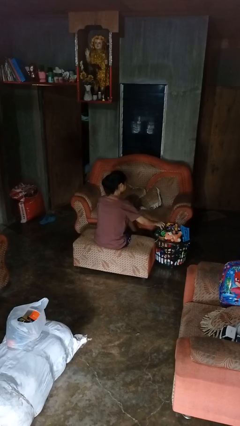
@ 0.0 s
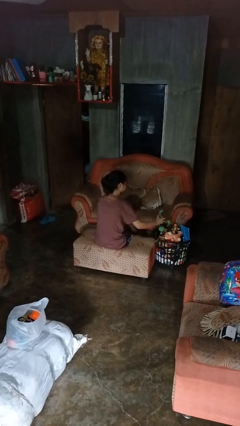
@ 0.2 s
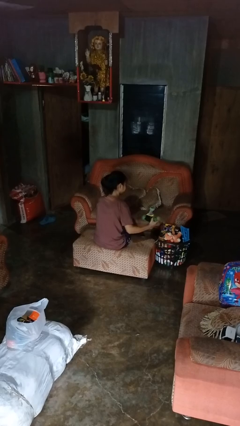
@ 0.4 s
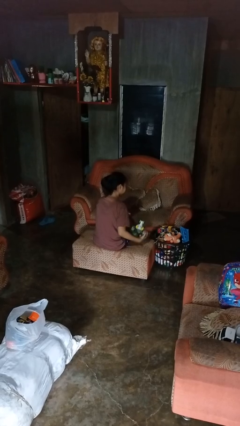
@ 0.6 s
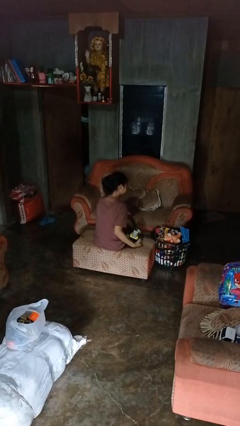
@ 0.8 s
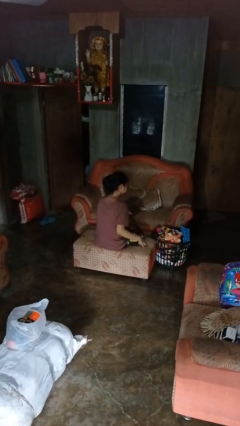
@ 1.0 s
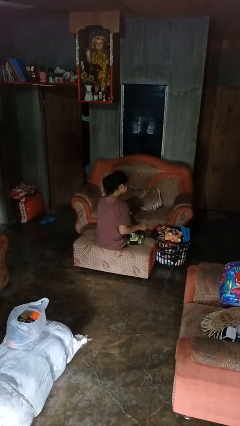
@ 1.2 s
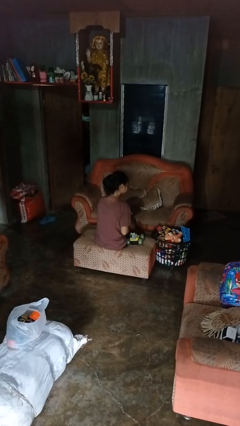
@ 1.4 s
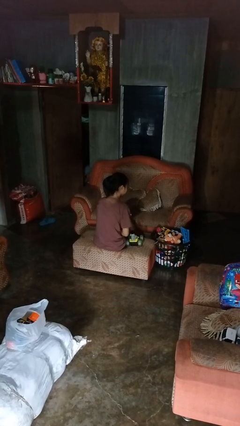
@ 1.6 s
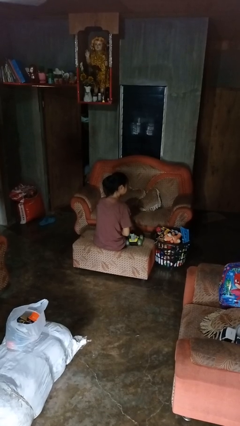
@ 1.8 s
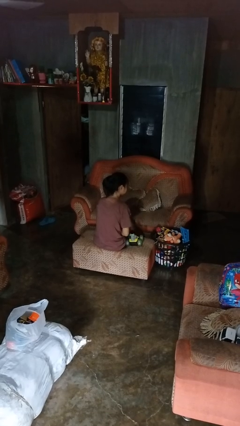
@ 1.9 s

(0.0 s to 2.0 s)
person takes object from basket

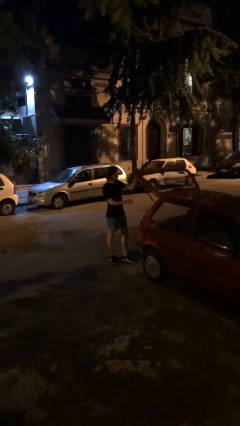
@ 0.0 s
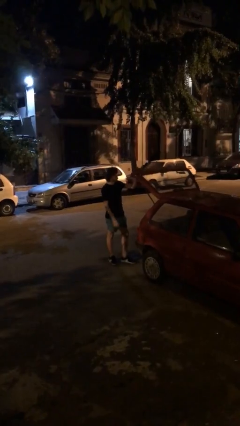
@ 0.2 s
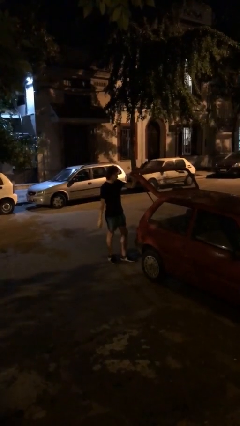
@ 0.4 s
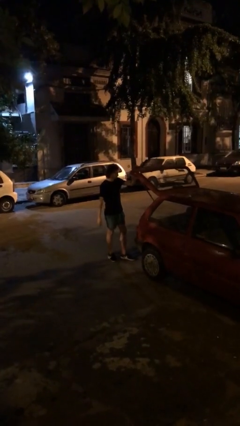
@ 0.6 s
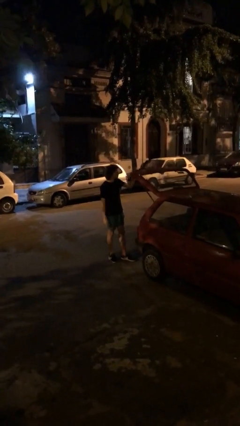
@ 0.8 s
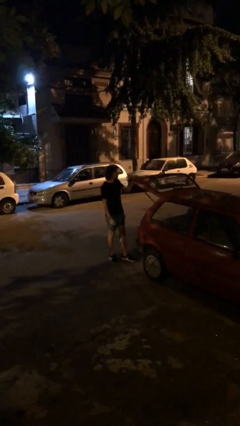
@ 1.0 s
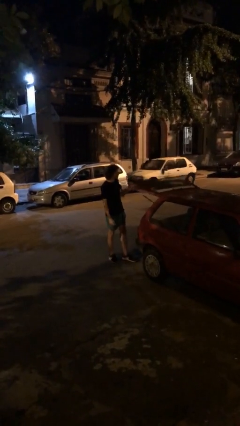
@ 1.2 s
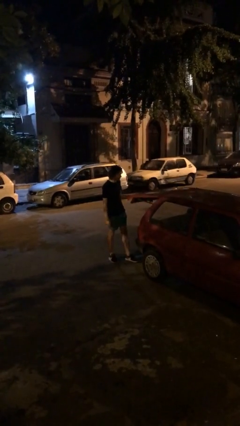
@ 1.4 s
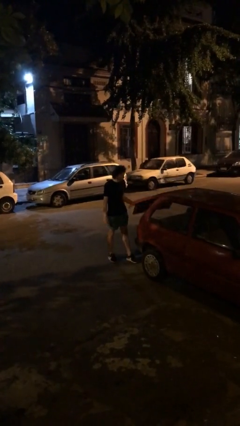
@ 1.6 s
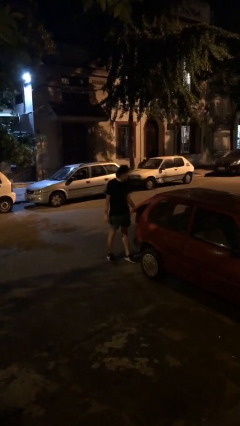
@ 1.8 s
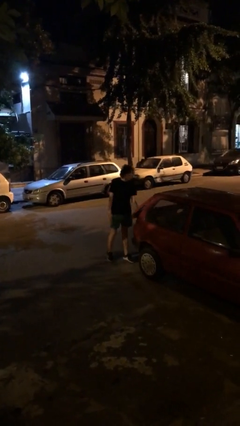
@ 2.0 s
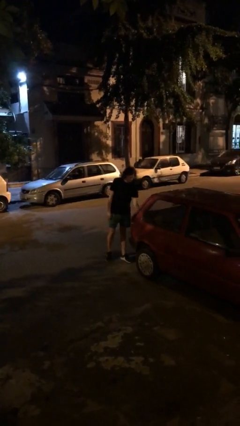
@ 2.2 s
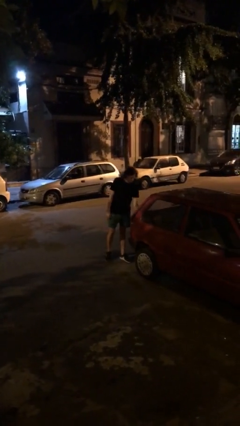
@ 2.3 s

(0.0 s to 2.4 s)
person closes car trunk

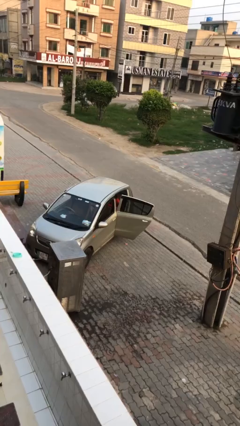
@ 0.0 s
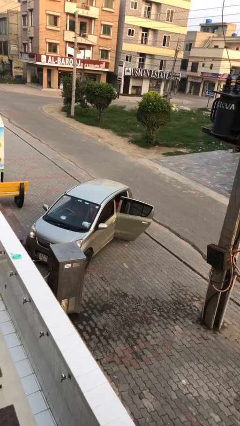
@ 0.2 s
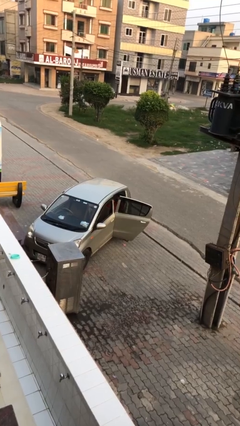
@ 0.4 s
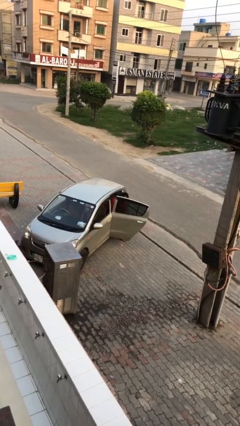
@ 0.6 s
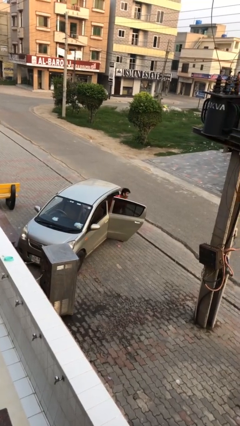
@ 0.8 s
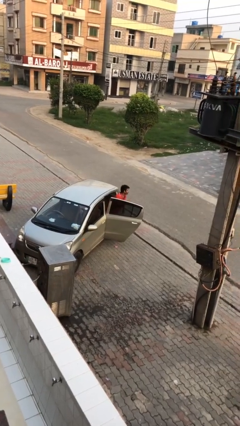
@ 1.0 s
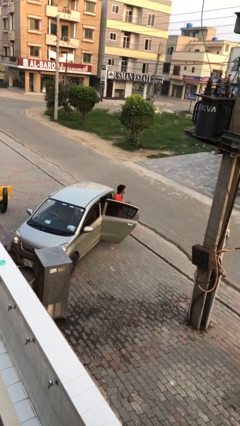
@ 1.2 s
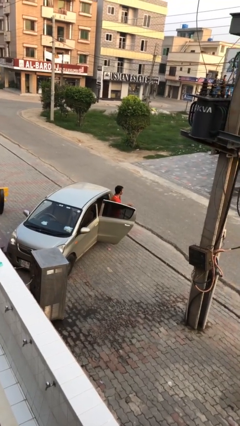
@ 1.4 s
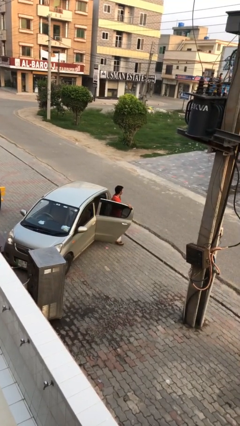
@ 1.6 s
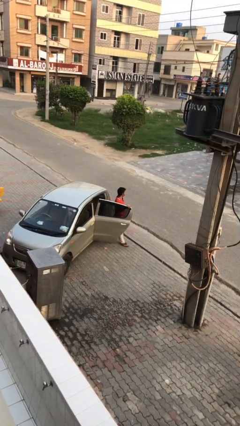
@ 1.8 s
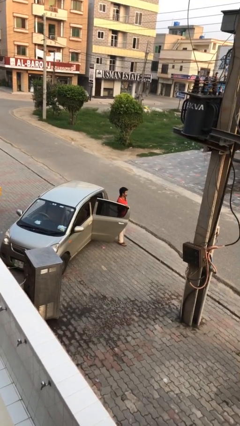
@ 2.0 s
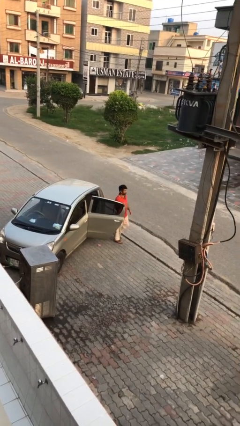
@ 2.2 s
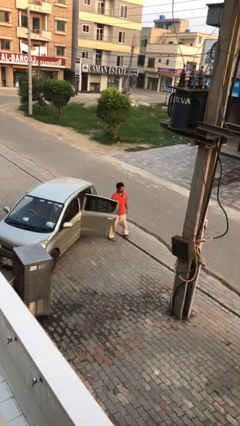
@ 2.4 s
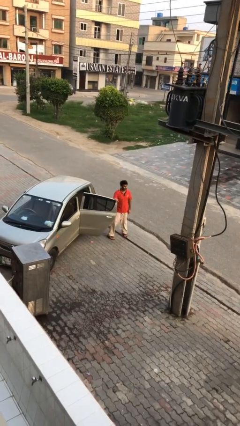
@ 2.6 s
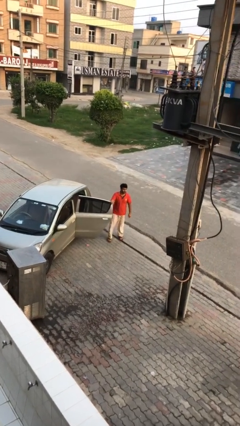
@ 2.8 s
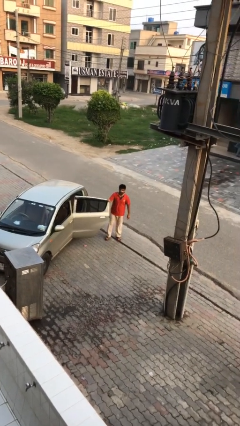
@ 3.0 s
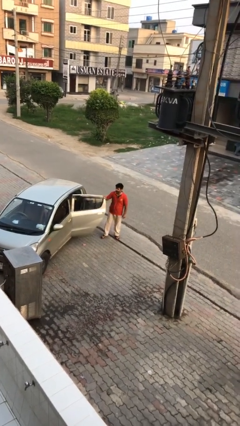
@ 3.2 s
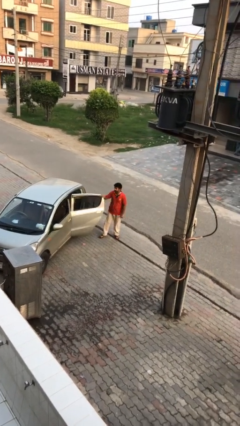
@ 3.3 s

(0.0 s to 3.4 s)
person exits car

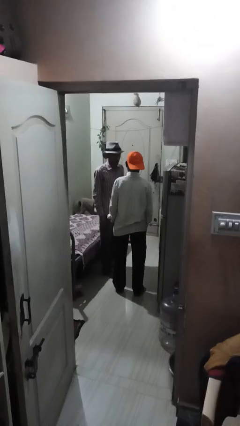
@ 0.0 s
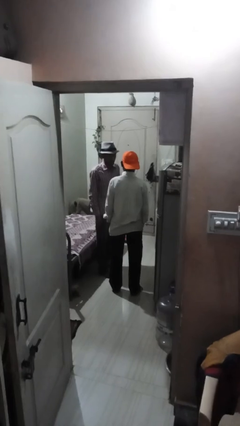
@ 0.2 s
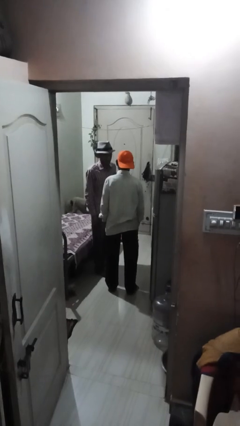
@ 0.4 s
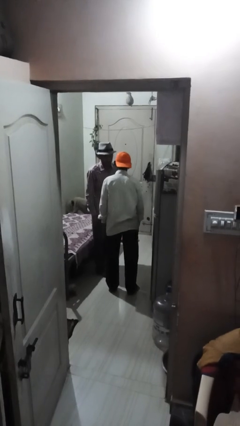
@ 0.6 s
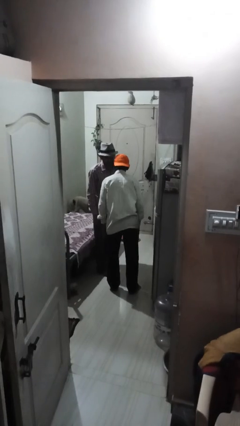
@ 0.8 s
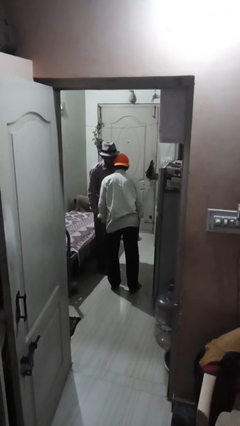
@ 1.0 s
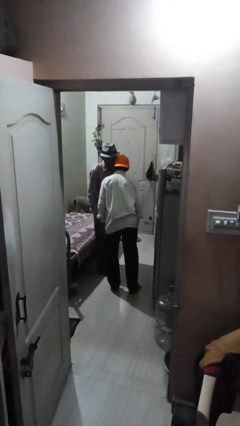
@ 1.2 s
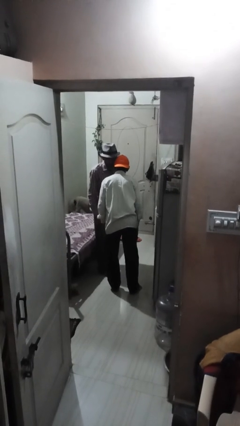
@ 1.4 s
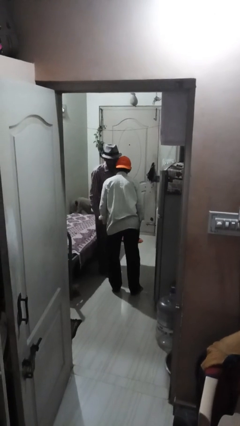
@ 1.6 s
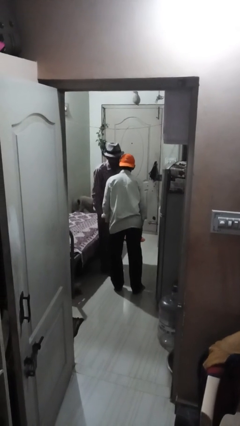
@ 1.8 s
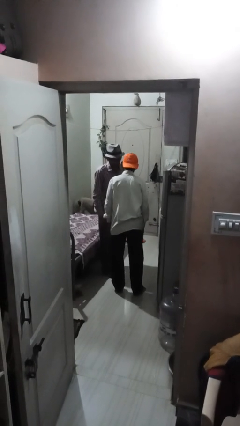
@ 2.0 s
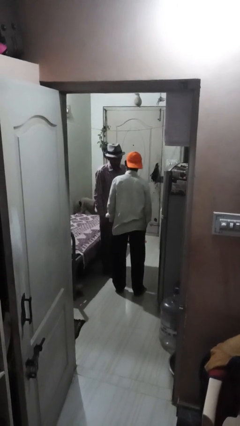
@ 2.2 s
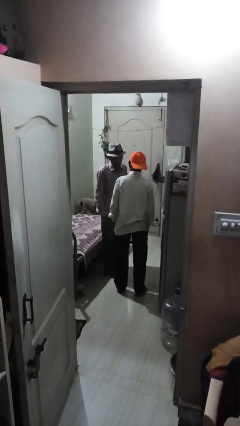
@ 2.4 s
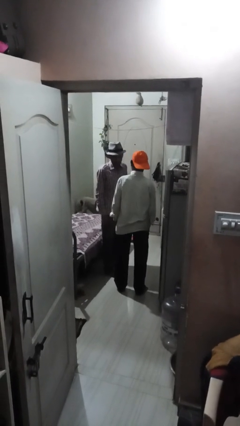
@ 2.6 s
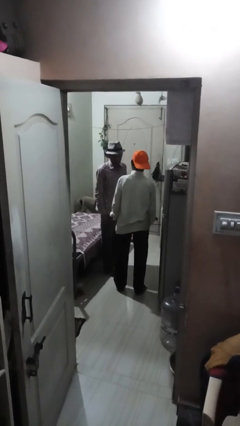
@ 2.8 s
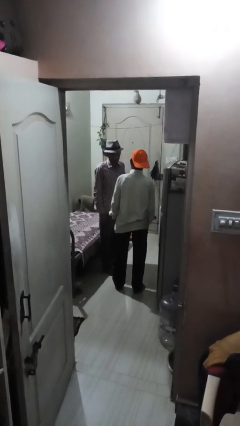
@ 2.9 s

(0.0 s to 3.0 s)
person kisses cheek of person

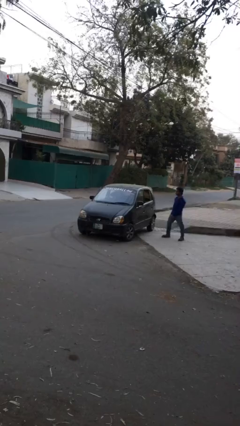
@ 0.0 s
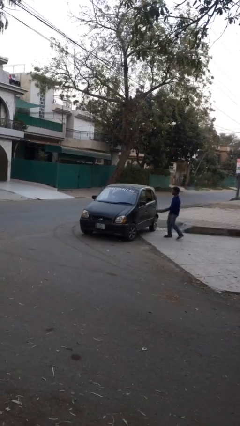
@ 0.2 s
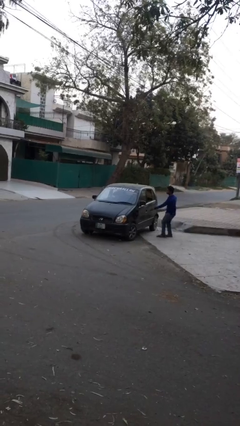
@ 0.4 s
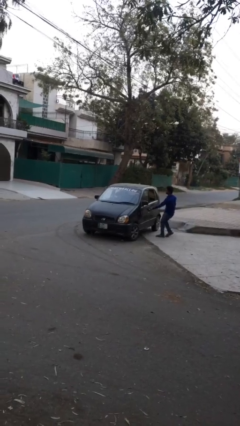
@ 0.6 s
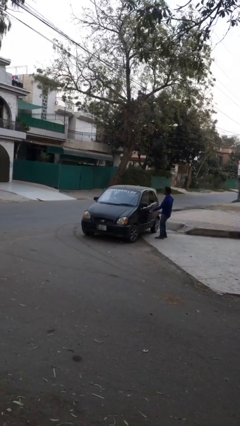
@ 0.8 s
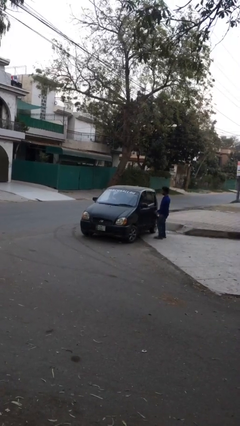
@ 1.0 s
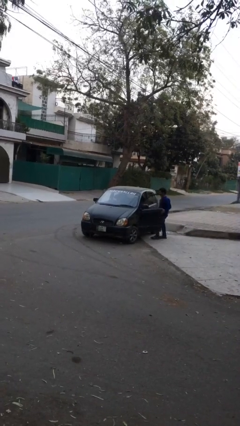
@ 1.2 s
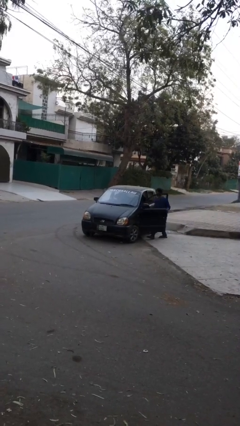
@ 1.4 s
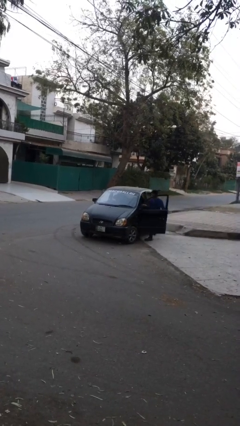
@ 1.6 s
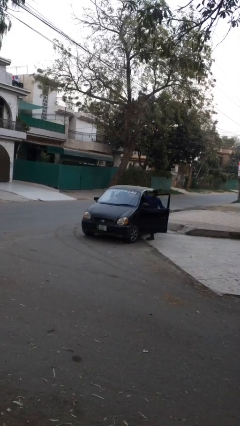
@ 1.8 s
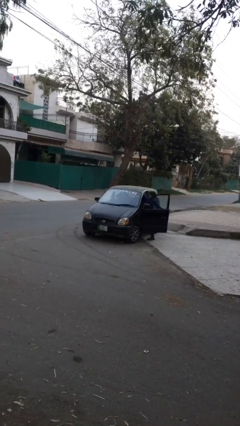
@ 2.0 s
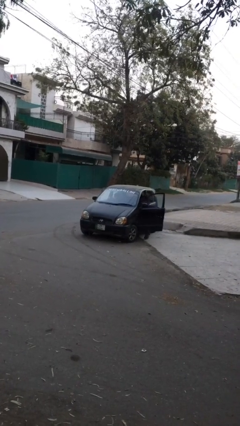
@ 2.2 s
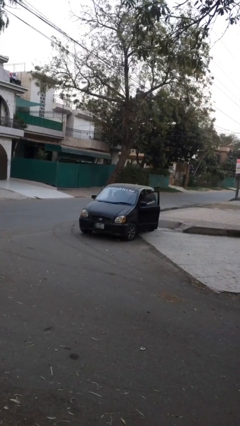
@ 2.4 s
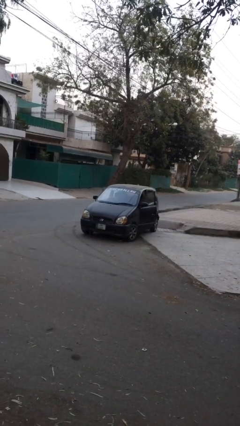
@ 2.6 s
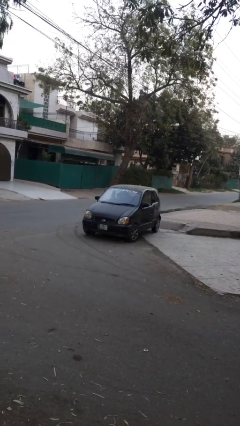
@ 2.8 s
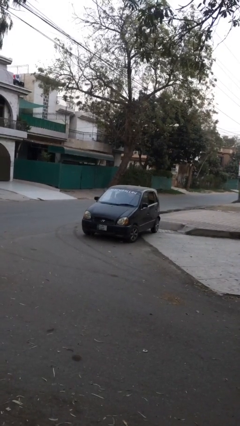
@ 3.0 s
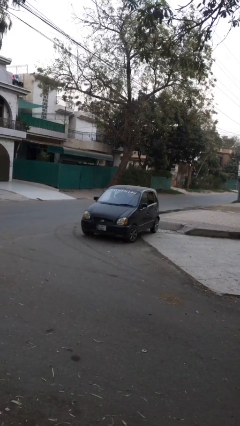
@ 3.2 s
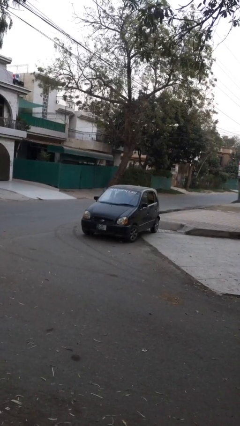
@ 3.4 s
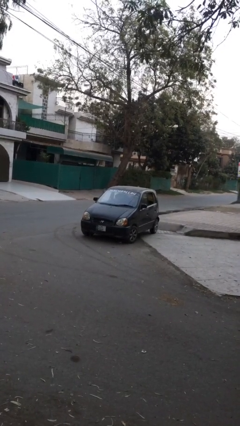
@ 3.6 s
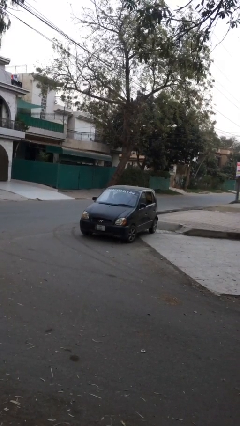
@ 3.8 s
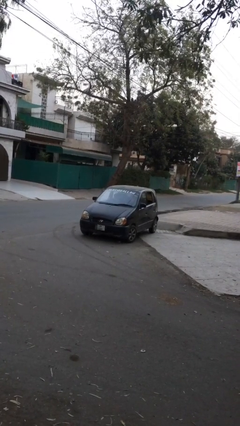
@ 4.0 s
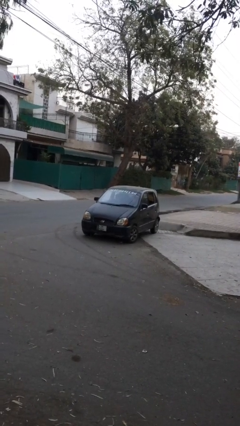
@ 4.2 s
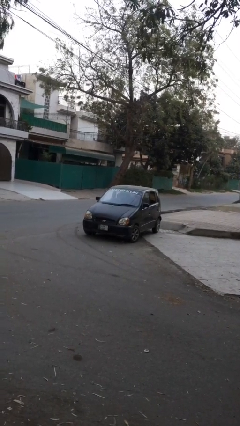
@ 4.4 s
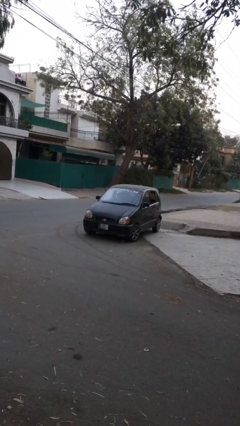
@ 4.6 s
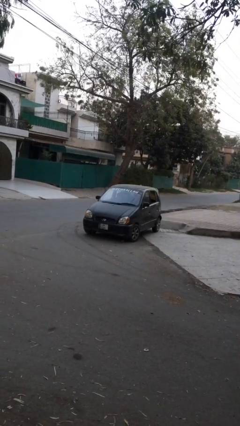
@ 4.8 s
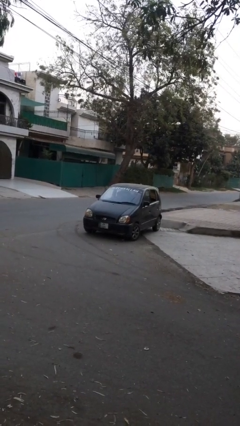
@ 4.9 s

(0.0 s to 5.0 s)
car picks up person

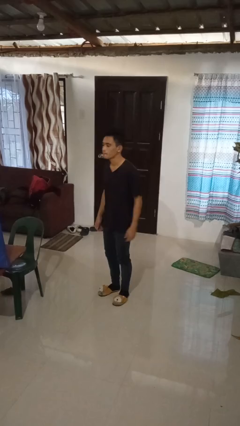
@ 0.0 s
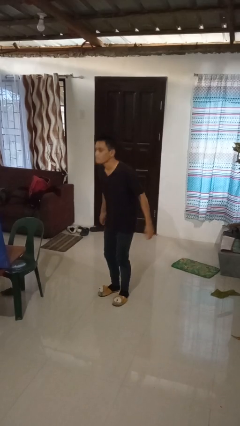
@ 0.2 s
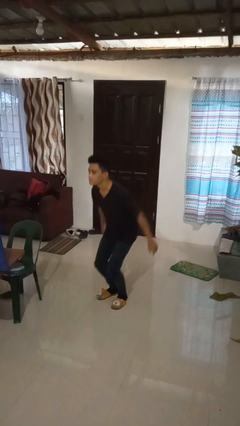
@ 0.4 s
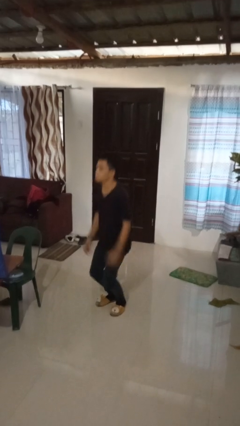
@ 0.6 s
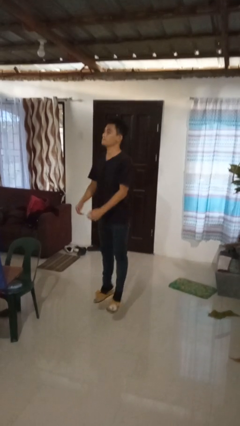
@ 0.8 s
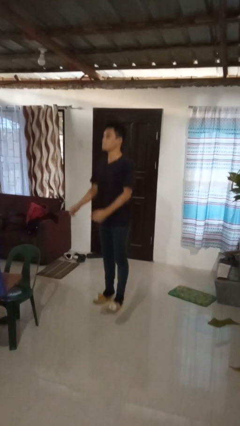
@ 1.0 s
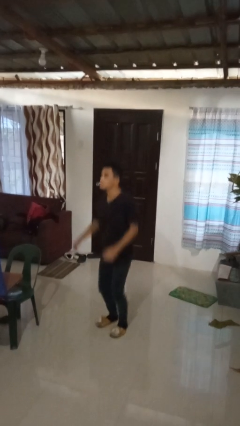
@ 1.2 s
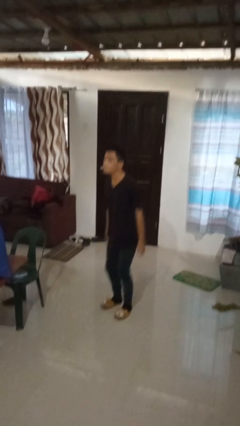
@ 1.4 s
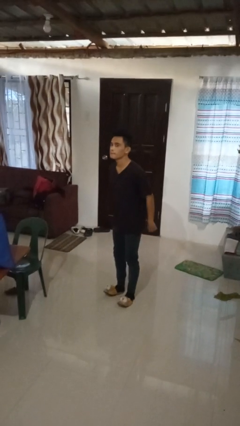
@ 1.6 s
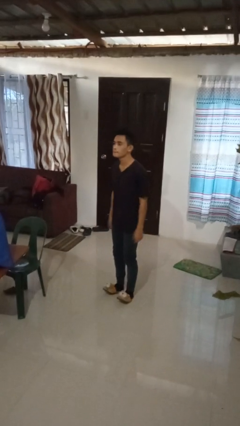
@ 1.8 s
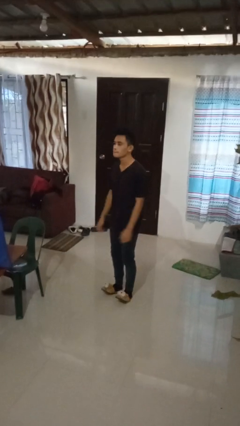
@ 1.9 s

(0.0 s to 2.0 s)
person jumps
